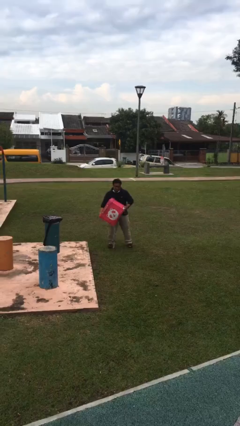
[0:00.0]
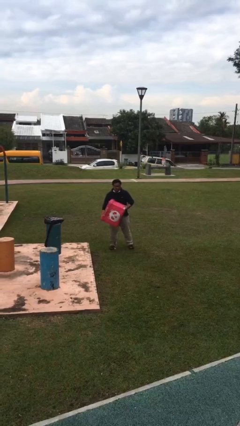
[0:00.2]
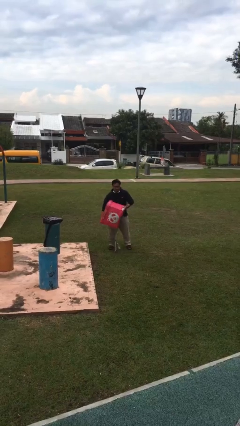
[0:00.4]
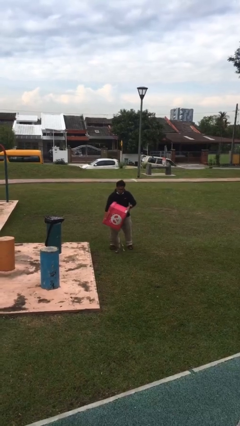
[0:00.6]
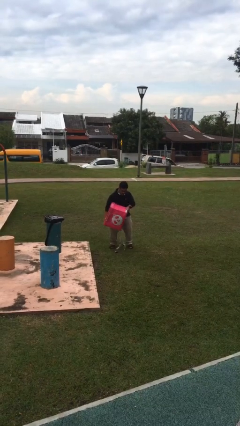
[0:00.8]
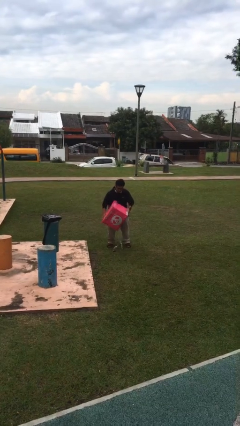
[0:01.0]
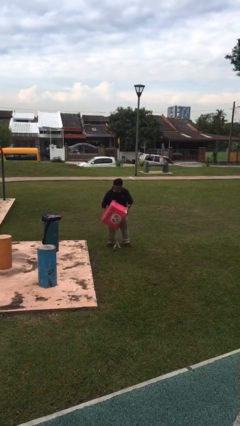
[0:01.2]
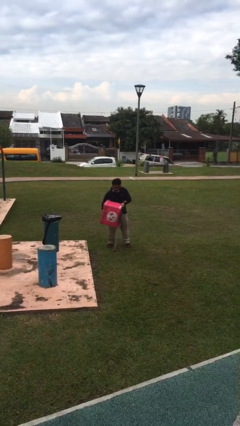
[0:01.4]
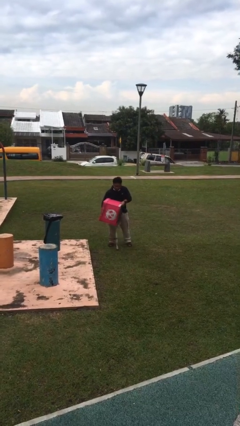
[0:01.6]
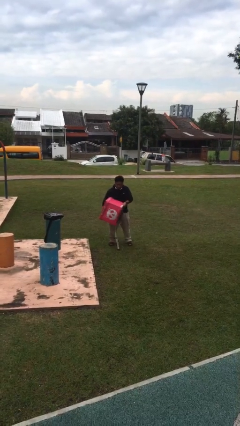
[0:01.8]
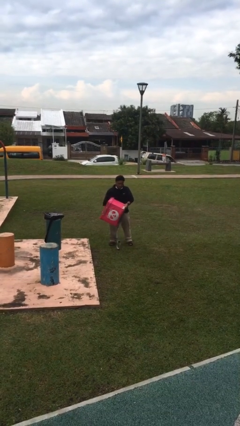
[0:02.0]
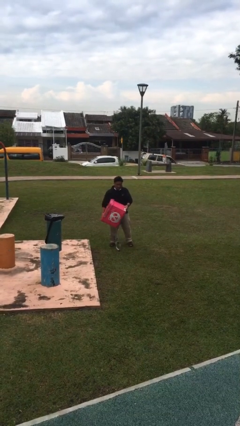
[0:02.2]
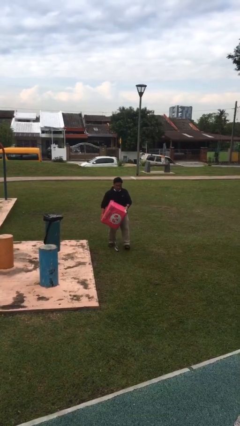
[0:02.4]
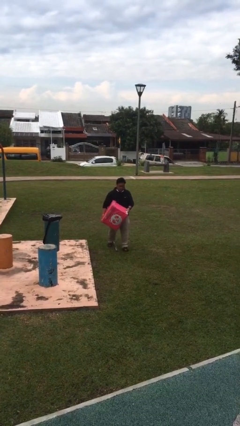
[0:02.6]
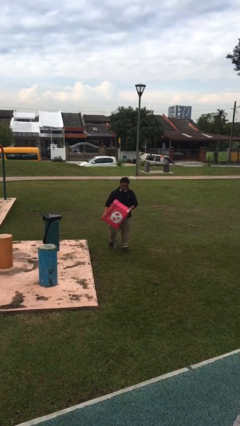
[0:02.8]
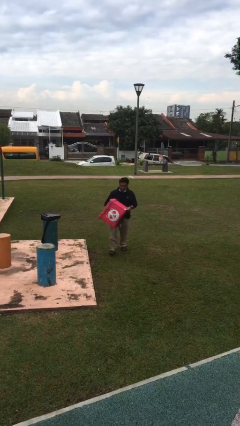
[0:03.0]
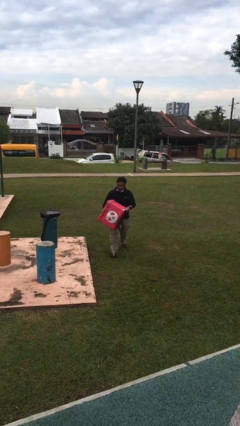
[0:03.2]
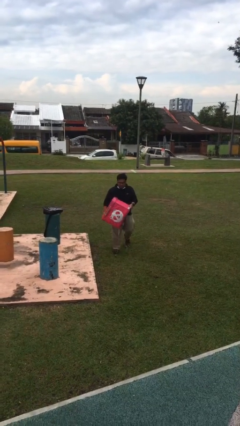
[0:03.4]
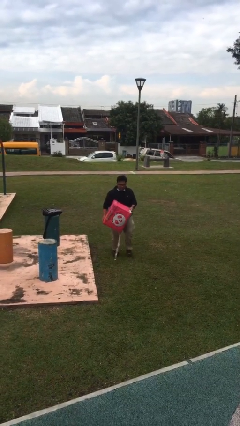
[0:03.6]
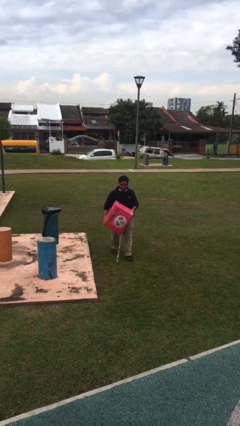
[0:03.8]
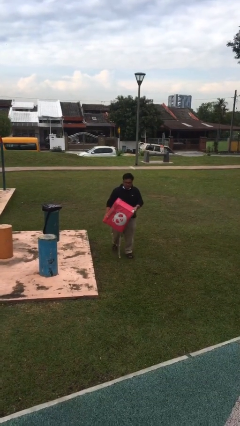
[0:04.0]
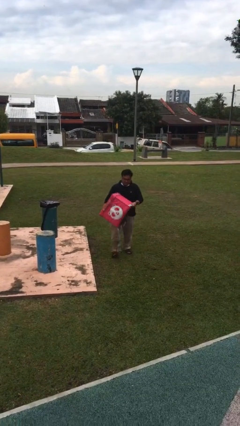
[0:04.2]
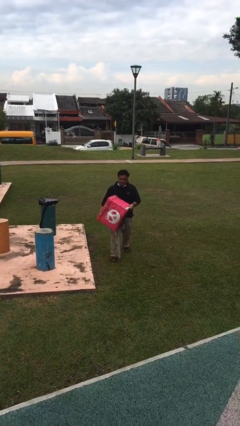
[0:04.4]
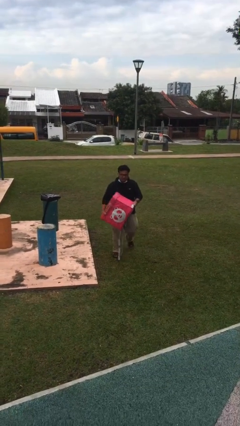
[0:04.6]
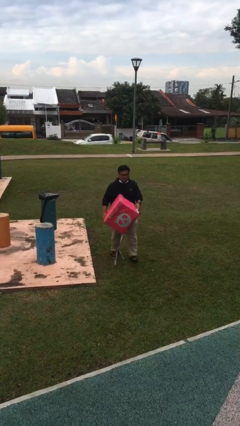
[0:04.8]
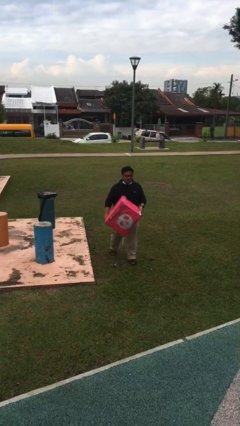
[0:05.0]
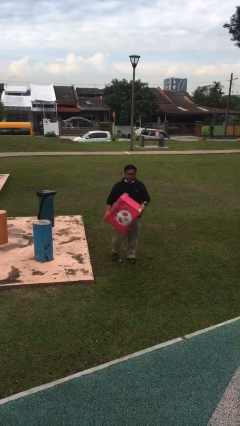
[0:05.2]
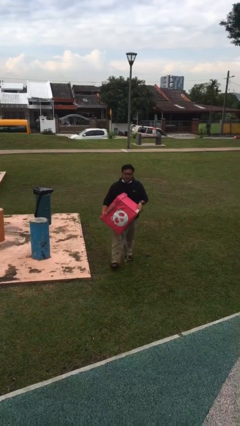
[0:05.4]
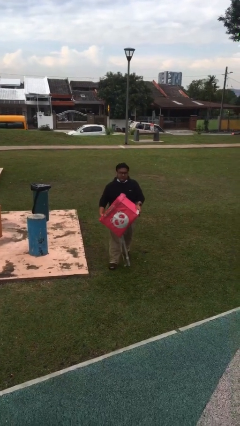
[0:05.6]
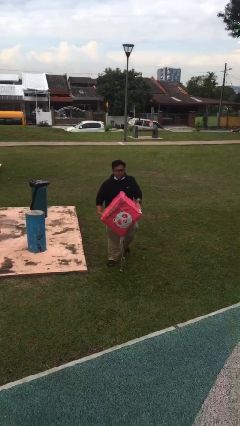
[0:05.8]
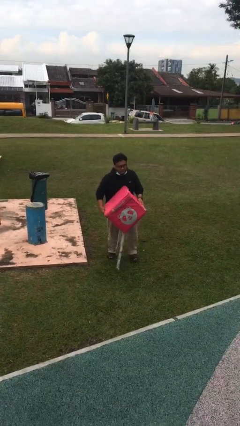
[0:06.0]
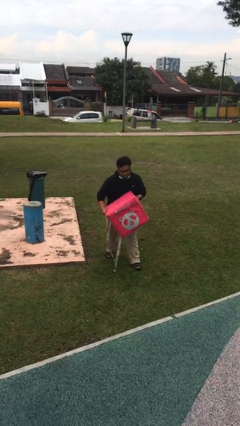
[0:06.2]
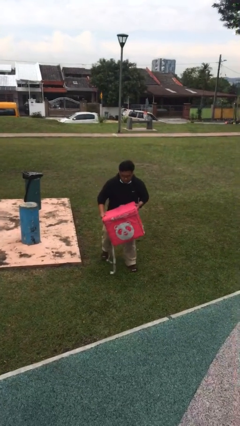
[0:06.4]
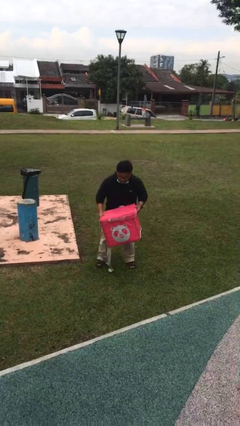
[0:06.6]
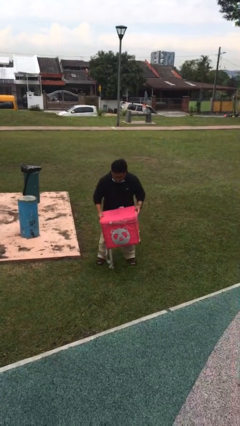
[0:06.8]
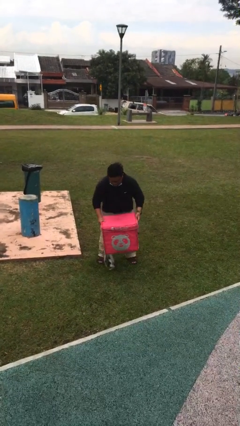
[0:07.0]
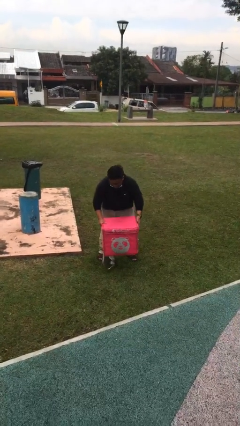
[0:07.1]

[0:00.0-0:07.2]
person carries heavy object

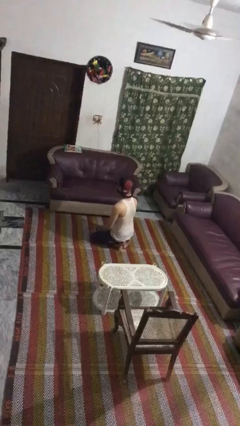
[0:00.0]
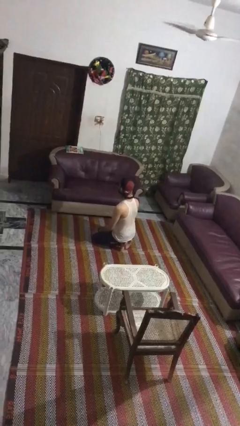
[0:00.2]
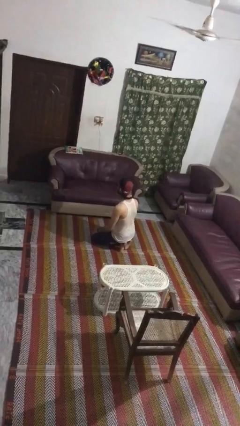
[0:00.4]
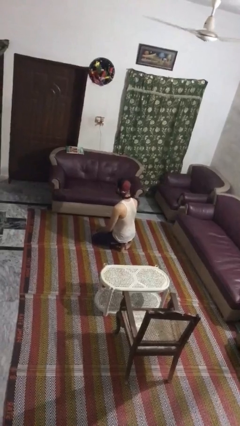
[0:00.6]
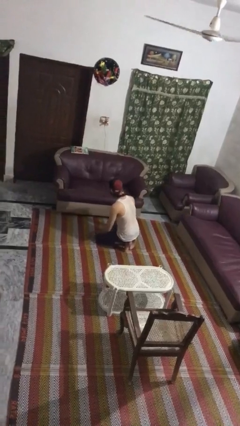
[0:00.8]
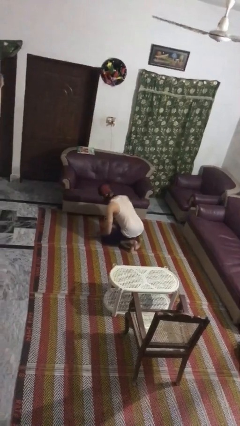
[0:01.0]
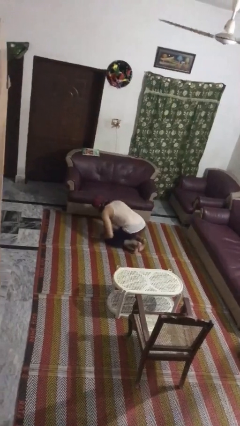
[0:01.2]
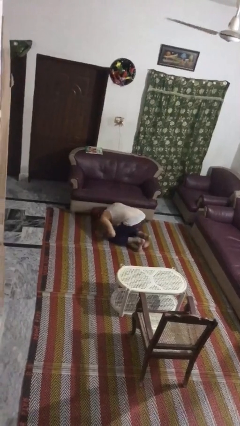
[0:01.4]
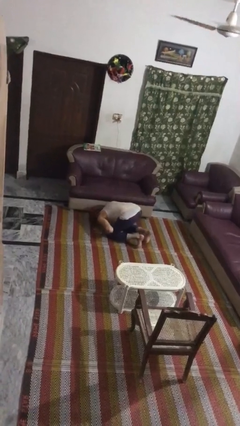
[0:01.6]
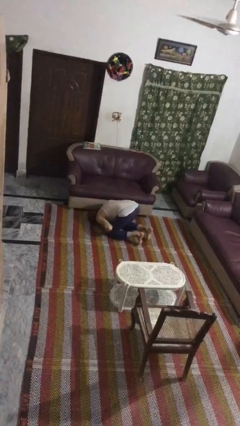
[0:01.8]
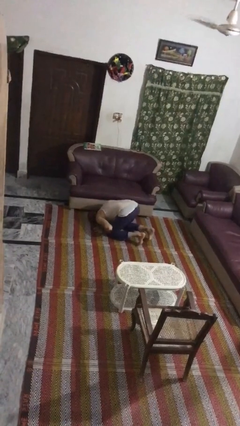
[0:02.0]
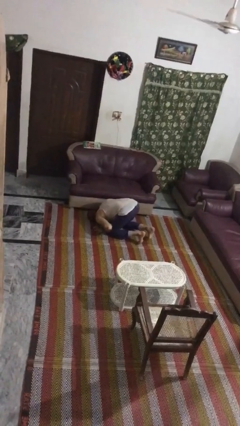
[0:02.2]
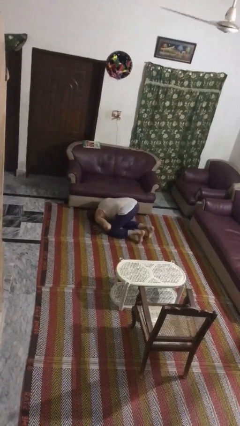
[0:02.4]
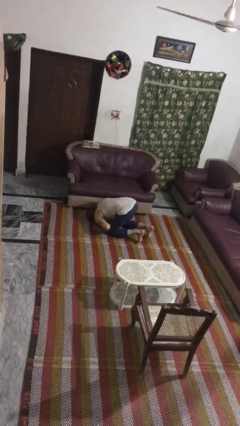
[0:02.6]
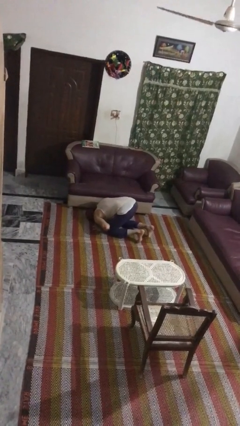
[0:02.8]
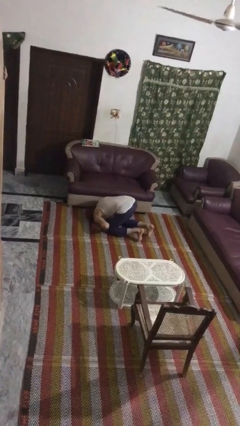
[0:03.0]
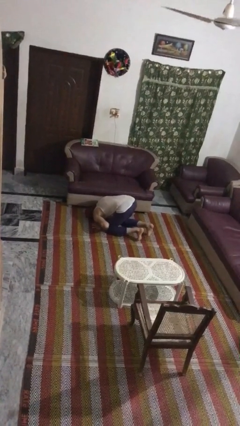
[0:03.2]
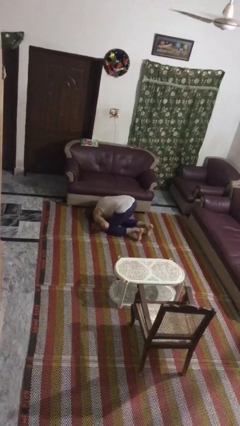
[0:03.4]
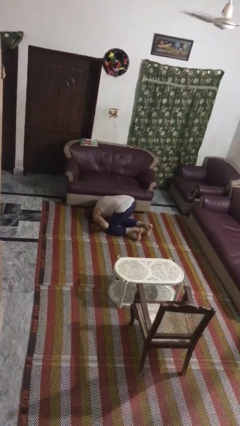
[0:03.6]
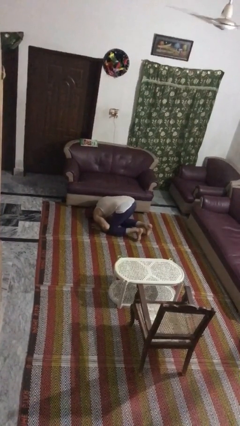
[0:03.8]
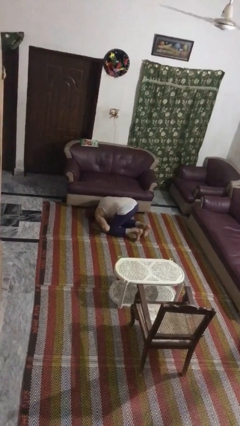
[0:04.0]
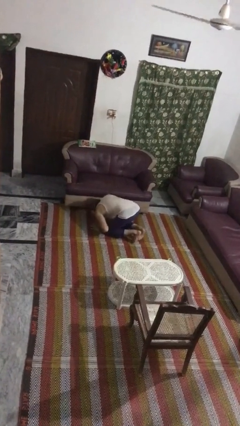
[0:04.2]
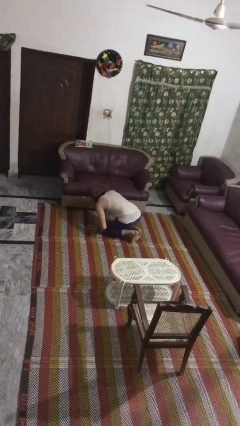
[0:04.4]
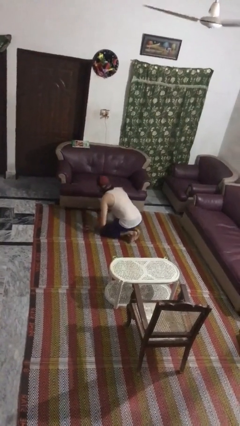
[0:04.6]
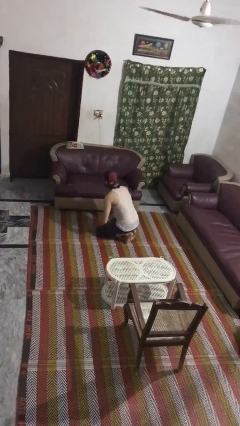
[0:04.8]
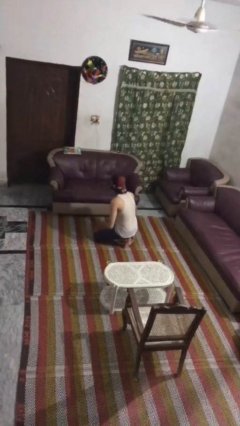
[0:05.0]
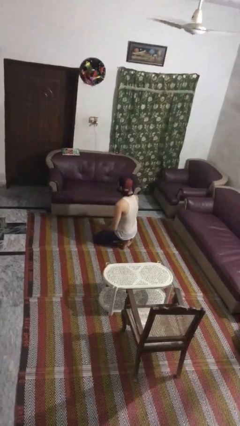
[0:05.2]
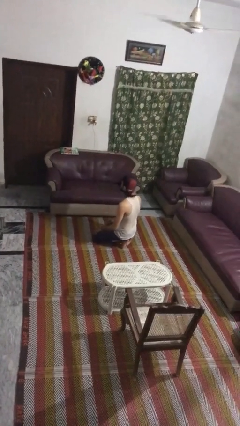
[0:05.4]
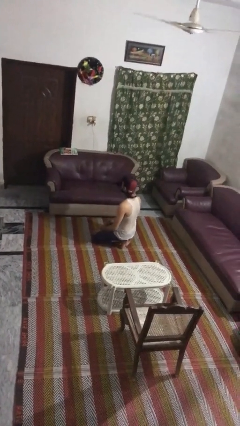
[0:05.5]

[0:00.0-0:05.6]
person searches under couch

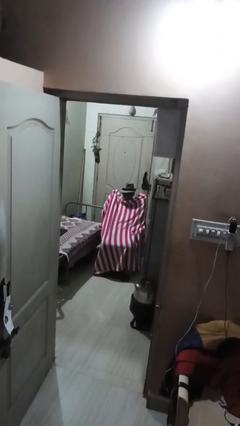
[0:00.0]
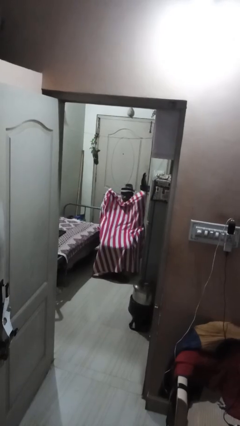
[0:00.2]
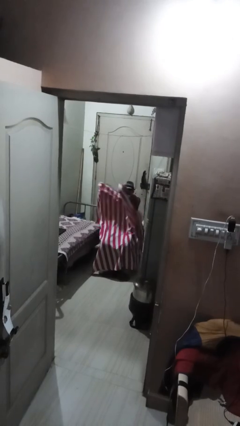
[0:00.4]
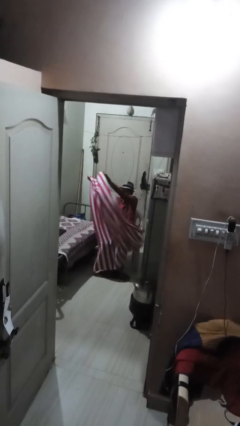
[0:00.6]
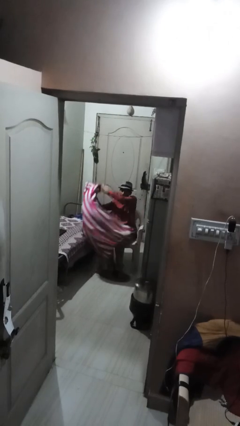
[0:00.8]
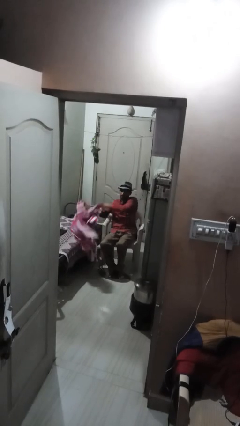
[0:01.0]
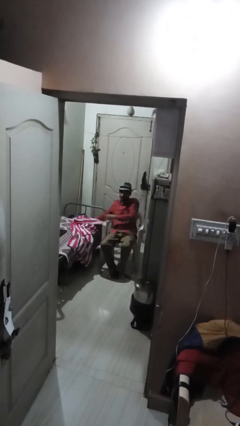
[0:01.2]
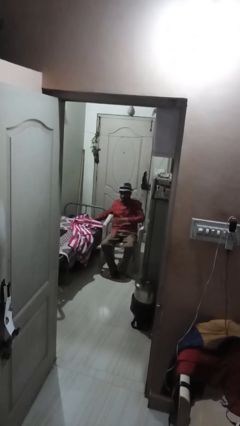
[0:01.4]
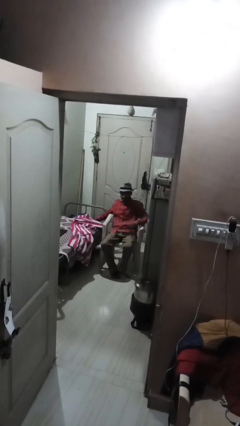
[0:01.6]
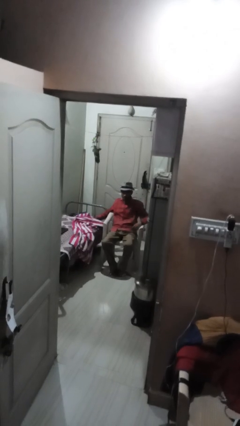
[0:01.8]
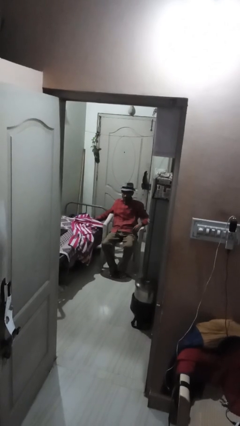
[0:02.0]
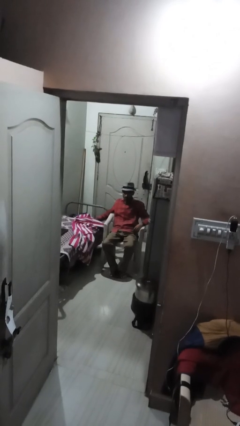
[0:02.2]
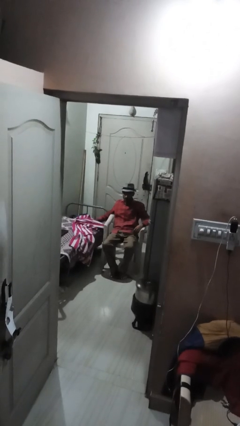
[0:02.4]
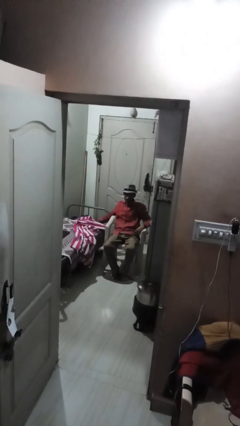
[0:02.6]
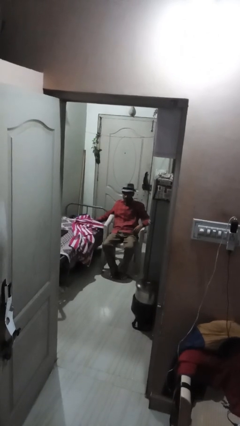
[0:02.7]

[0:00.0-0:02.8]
person uncovers with blanket

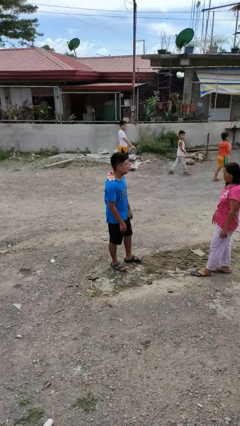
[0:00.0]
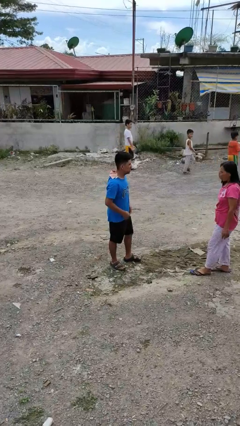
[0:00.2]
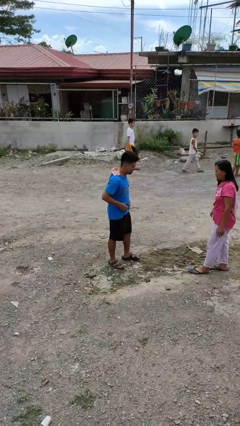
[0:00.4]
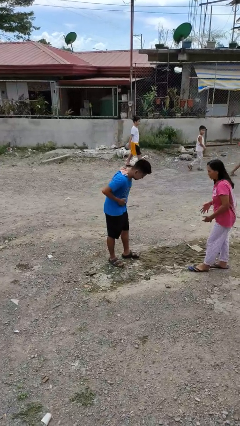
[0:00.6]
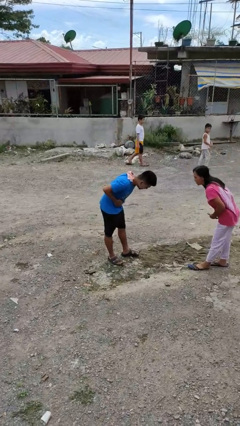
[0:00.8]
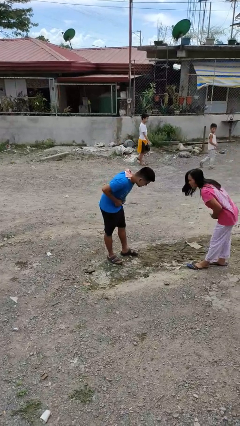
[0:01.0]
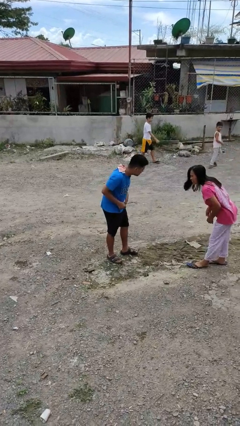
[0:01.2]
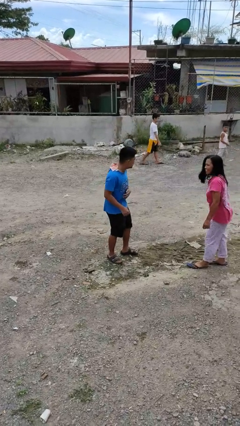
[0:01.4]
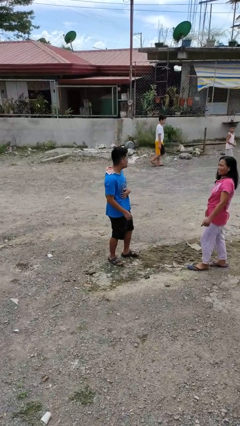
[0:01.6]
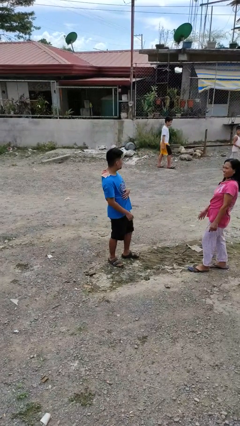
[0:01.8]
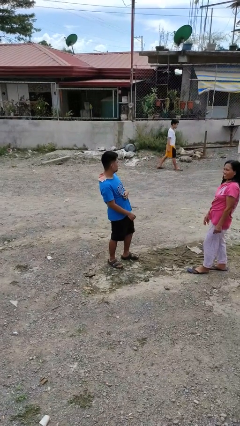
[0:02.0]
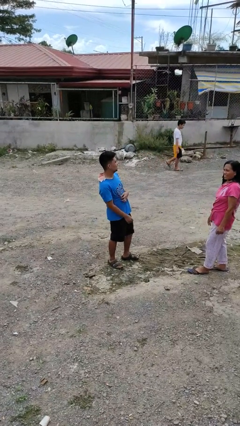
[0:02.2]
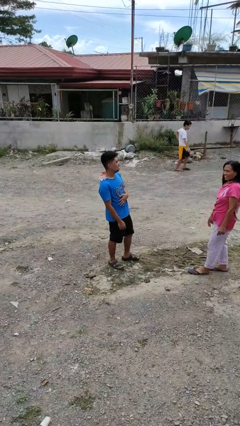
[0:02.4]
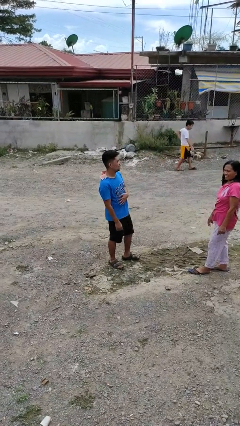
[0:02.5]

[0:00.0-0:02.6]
person laughs with person
